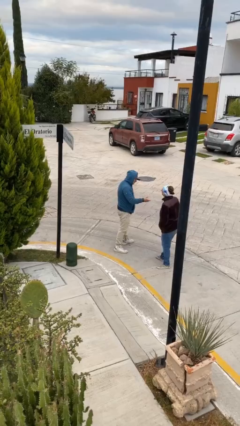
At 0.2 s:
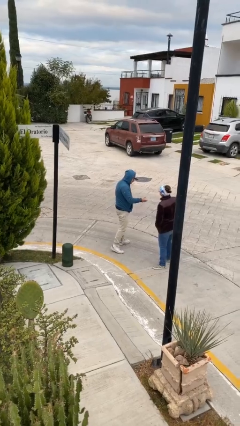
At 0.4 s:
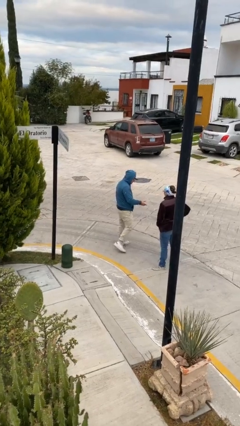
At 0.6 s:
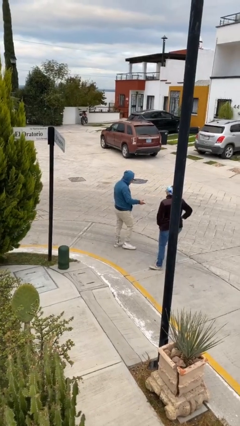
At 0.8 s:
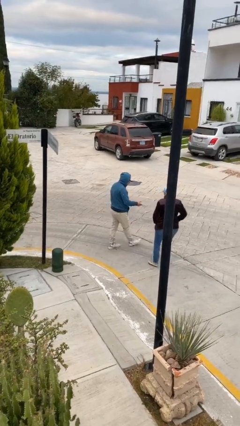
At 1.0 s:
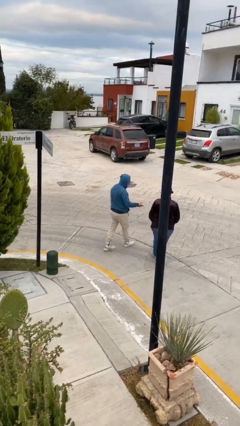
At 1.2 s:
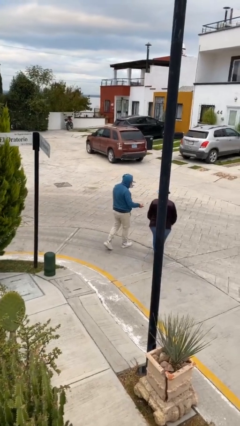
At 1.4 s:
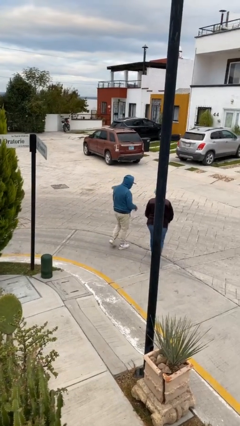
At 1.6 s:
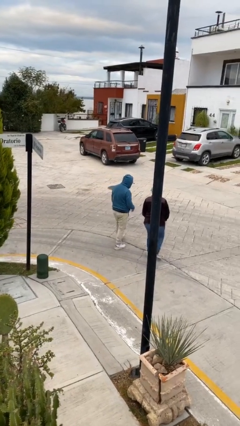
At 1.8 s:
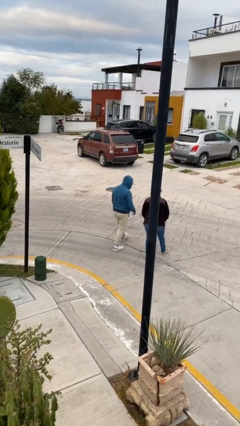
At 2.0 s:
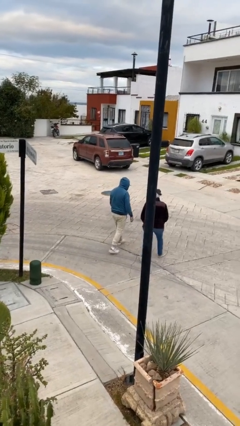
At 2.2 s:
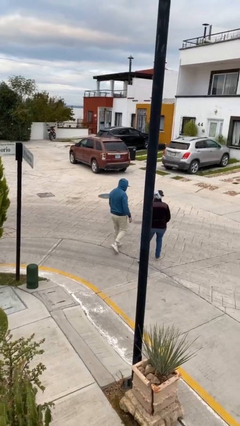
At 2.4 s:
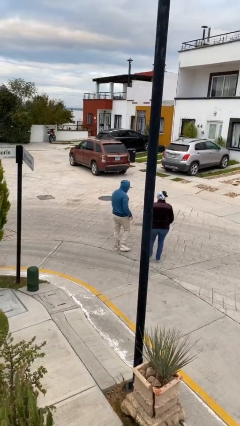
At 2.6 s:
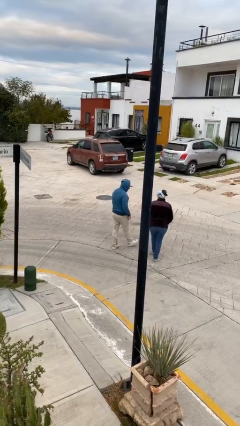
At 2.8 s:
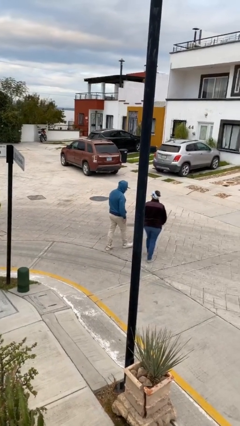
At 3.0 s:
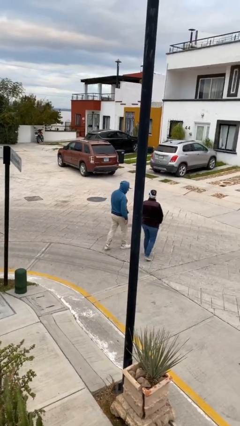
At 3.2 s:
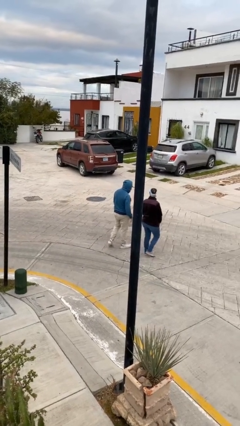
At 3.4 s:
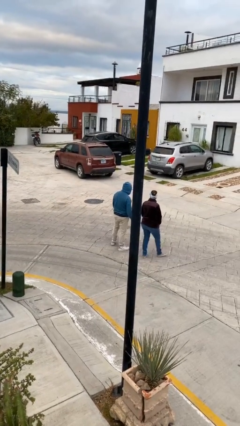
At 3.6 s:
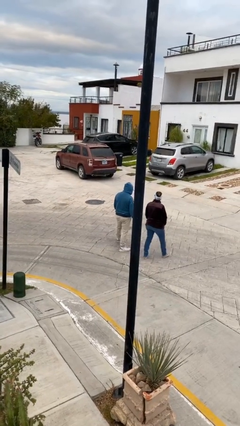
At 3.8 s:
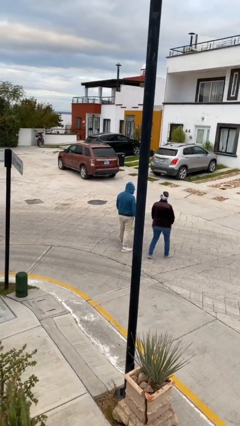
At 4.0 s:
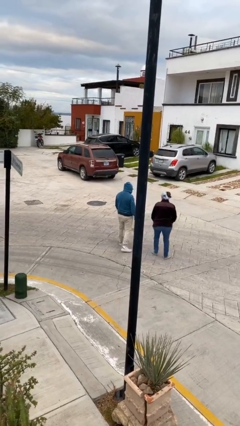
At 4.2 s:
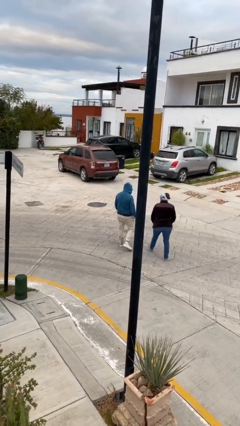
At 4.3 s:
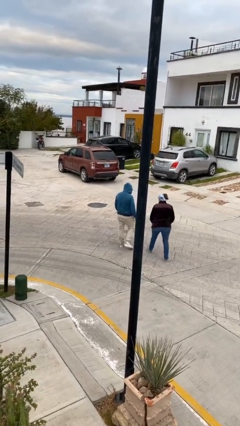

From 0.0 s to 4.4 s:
person talks to person

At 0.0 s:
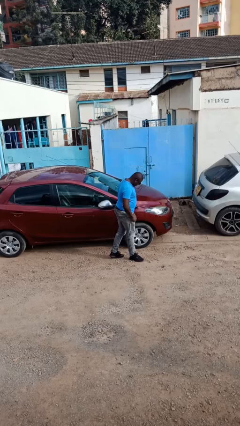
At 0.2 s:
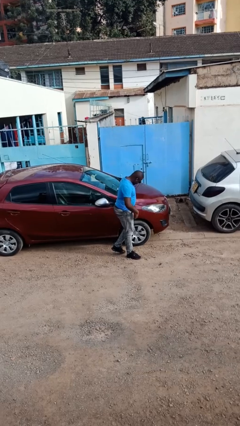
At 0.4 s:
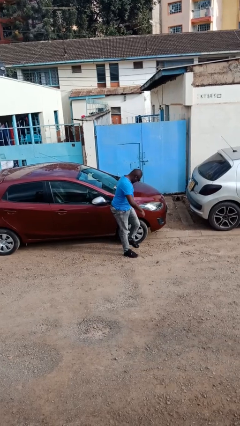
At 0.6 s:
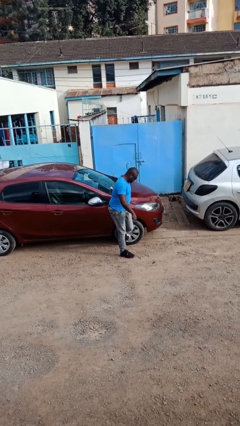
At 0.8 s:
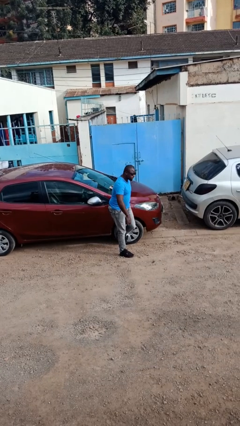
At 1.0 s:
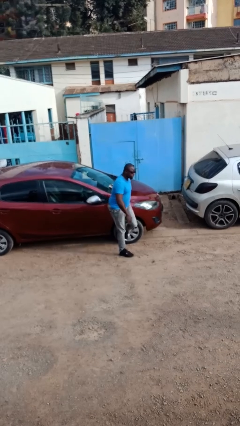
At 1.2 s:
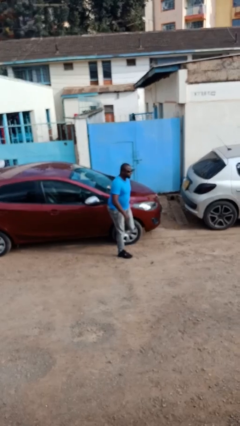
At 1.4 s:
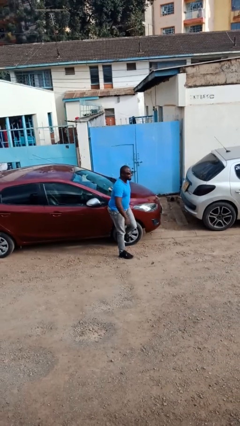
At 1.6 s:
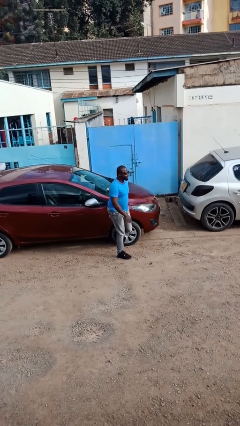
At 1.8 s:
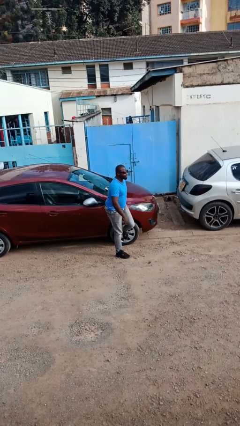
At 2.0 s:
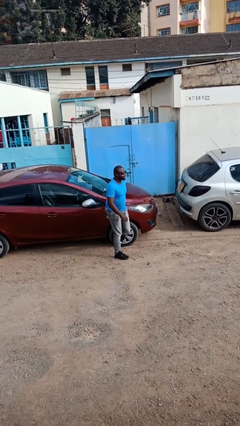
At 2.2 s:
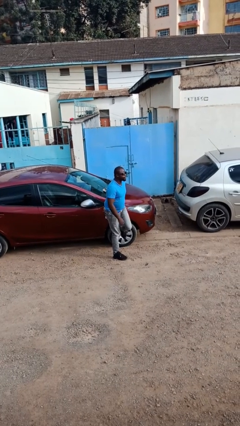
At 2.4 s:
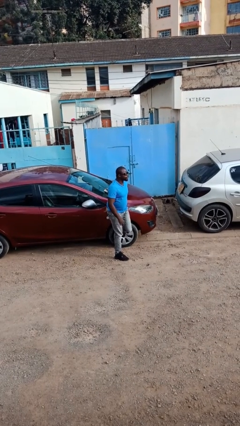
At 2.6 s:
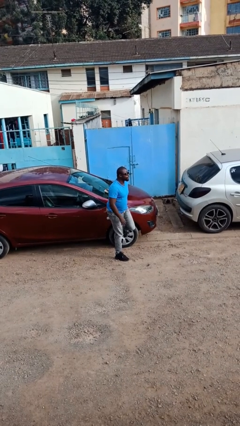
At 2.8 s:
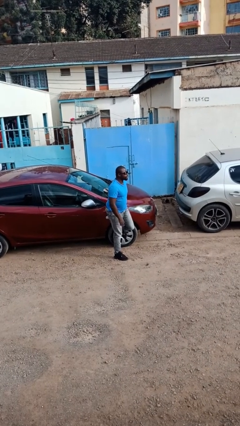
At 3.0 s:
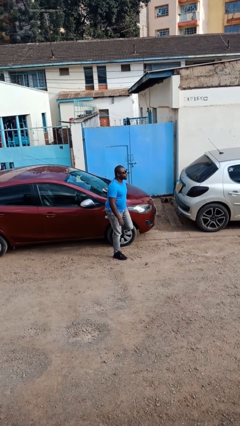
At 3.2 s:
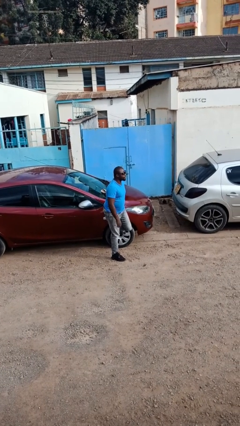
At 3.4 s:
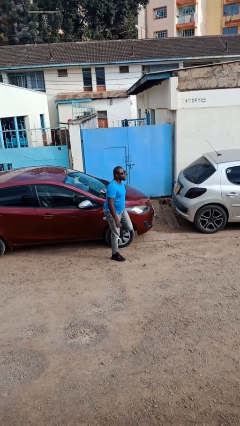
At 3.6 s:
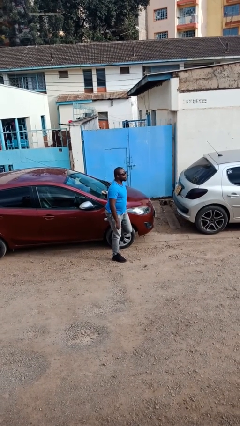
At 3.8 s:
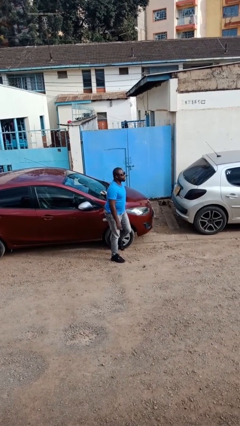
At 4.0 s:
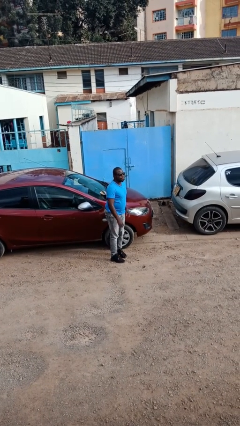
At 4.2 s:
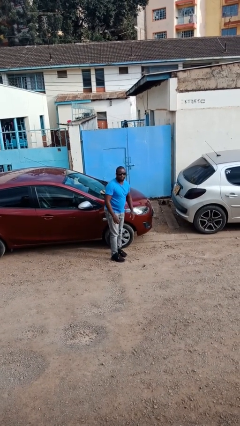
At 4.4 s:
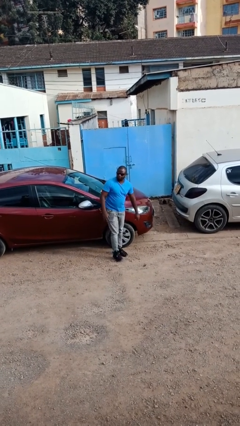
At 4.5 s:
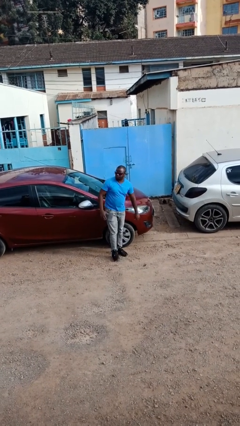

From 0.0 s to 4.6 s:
person kicks car tires

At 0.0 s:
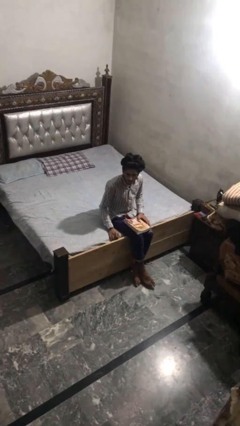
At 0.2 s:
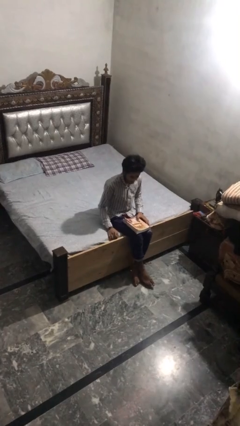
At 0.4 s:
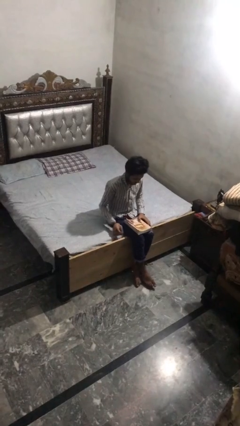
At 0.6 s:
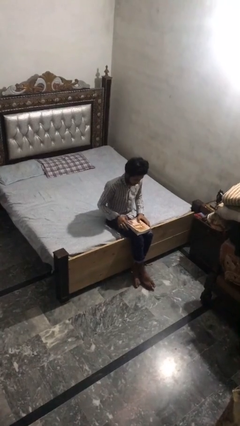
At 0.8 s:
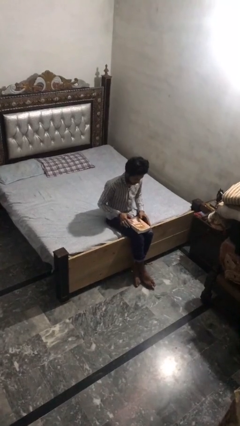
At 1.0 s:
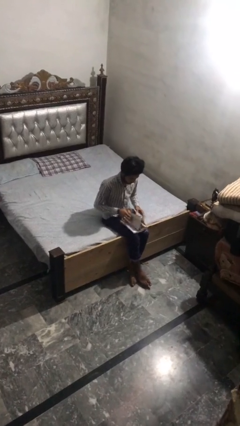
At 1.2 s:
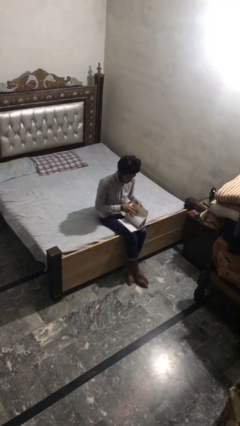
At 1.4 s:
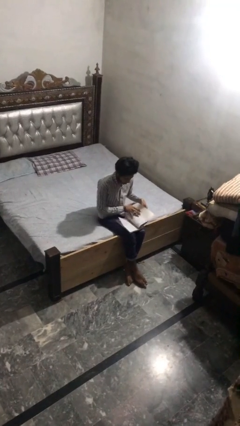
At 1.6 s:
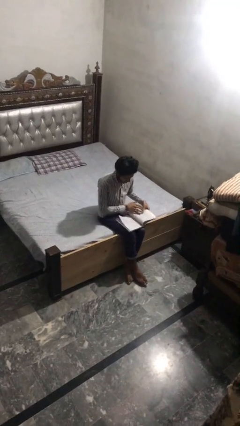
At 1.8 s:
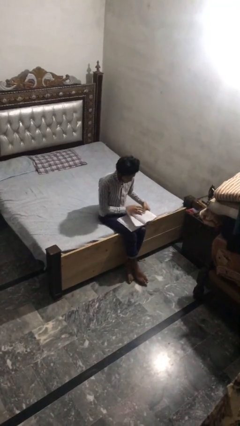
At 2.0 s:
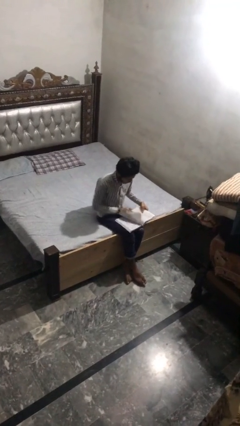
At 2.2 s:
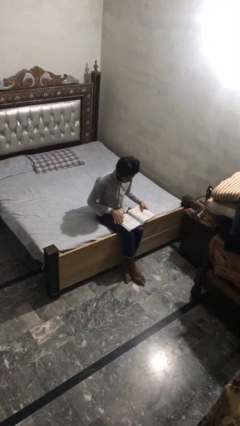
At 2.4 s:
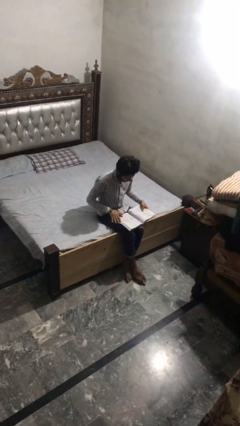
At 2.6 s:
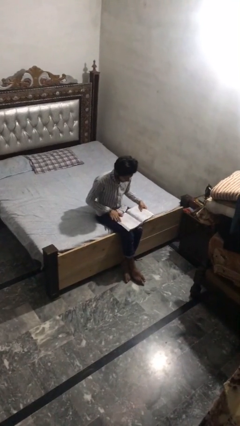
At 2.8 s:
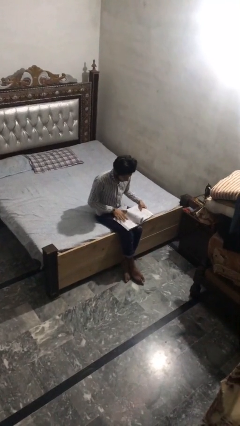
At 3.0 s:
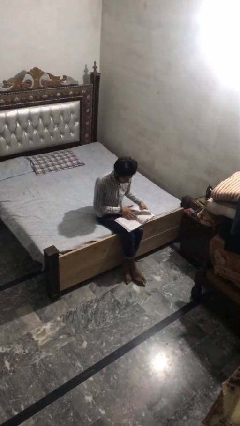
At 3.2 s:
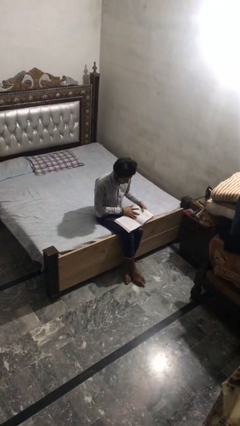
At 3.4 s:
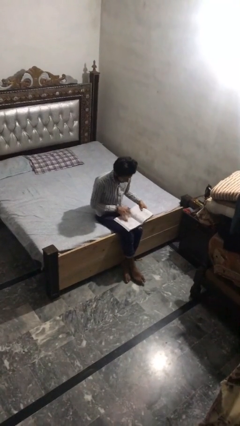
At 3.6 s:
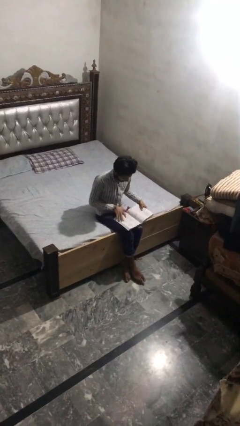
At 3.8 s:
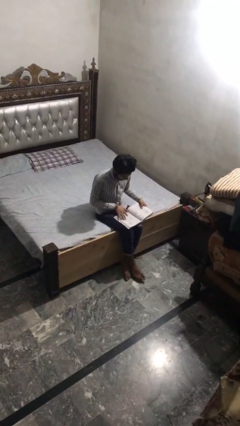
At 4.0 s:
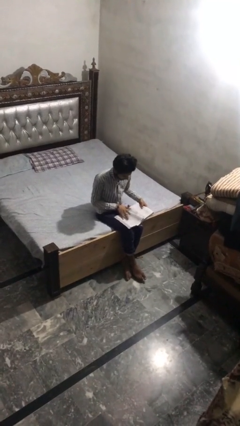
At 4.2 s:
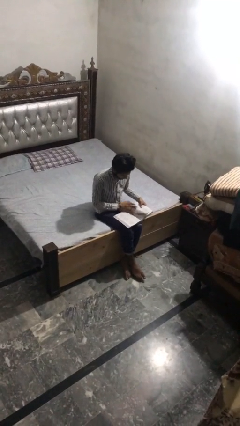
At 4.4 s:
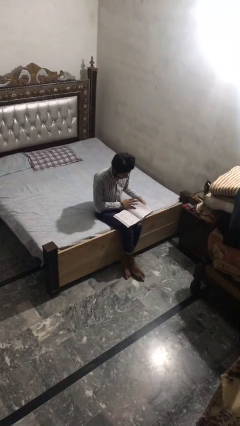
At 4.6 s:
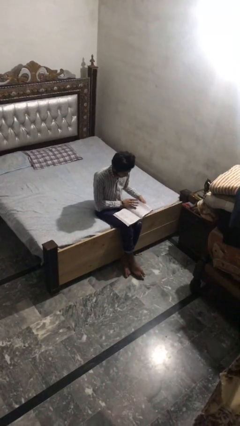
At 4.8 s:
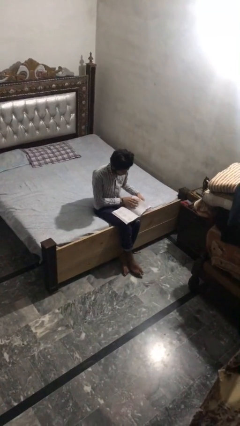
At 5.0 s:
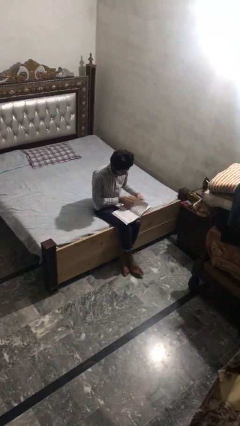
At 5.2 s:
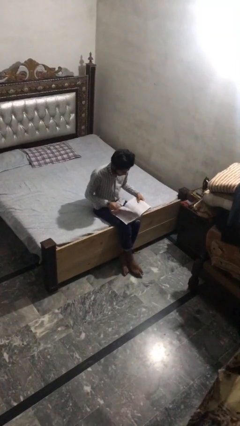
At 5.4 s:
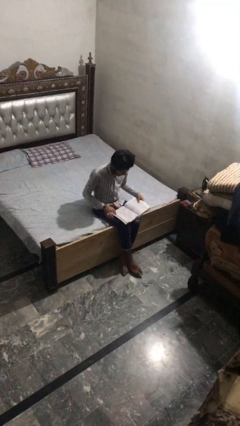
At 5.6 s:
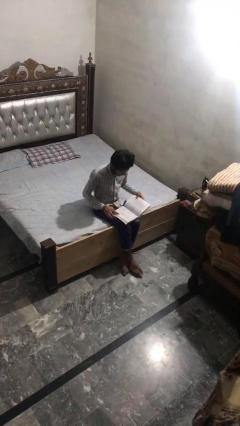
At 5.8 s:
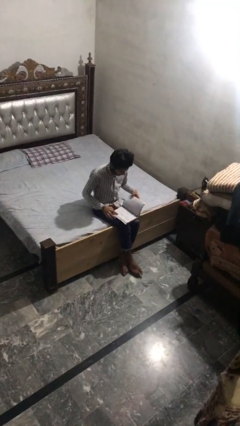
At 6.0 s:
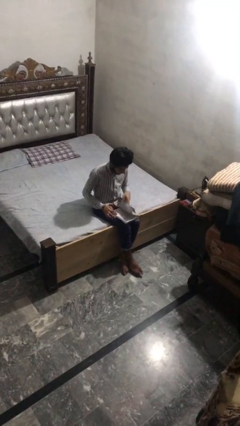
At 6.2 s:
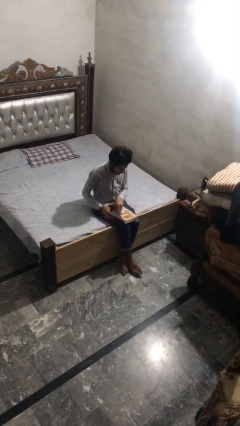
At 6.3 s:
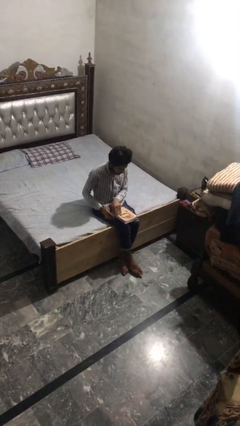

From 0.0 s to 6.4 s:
person reads book

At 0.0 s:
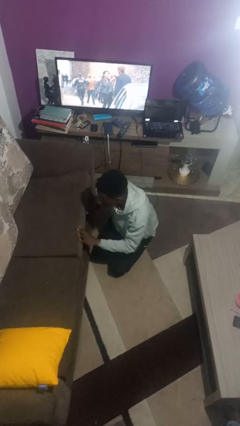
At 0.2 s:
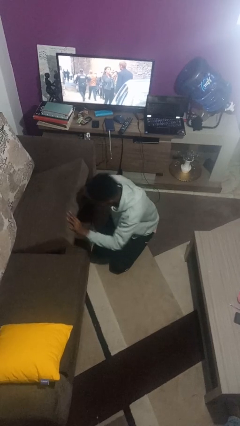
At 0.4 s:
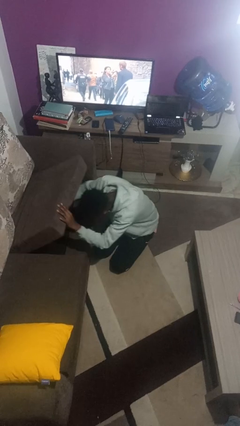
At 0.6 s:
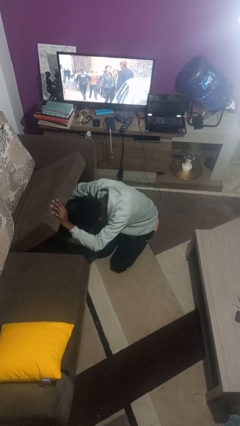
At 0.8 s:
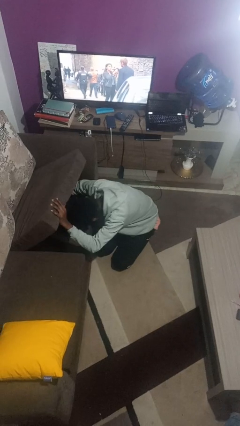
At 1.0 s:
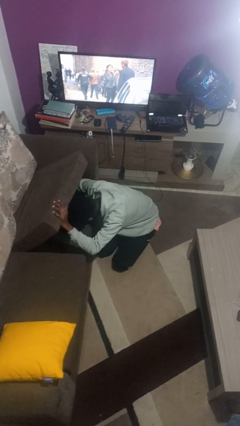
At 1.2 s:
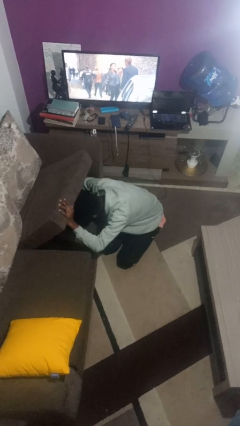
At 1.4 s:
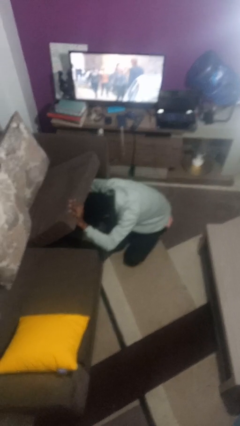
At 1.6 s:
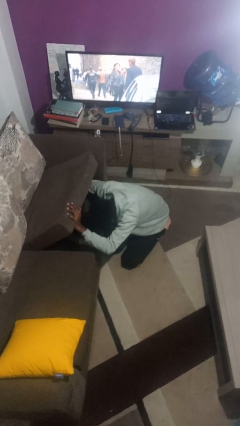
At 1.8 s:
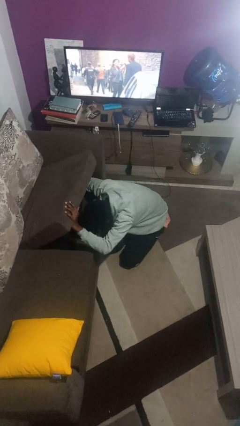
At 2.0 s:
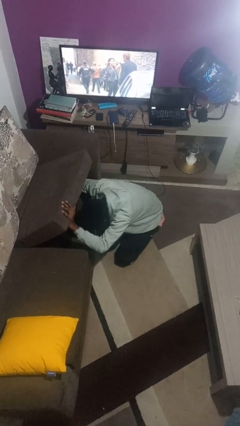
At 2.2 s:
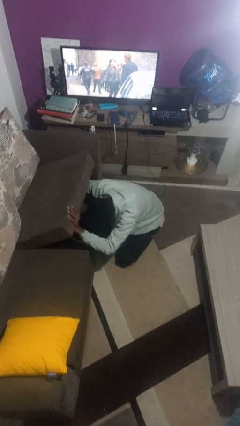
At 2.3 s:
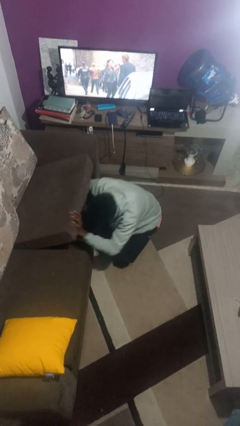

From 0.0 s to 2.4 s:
person searches under couch
